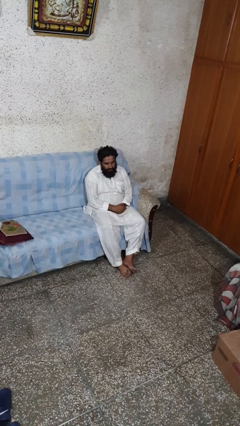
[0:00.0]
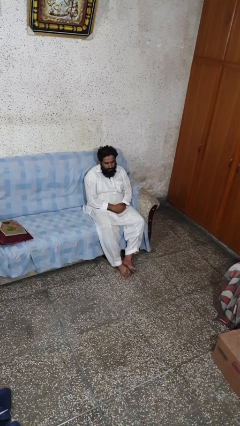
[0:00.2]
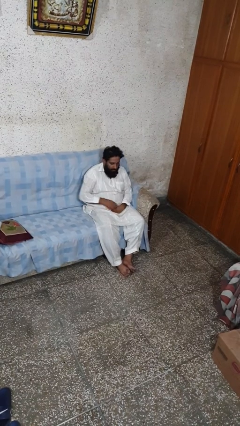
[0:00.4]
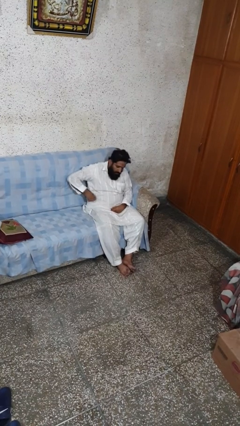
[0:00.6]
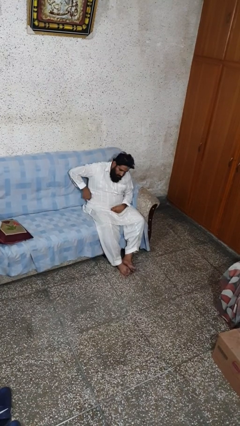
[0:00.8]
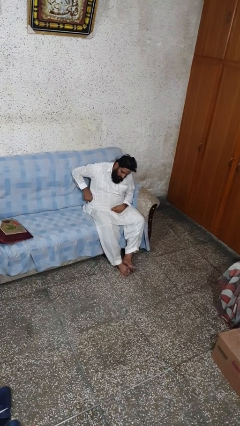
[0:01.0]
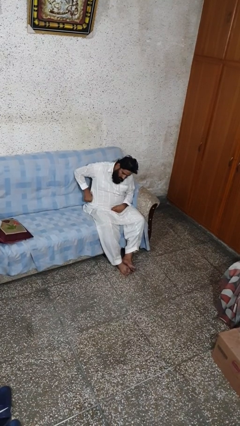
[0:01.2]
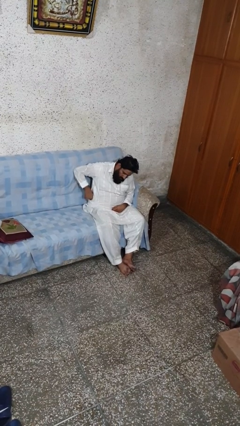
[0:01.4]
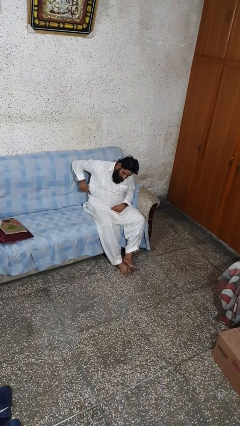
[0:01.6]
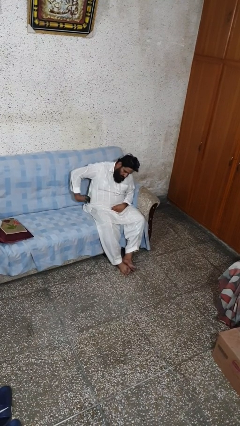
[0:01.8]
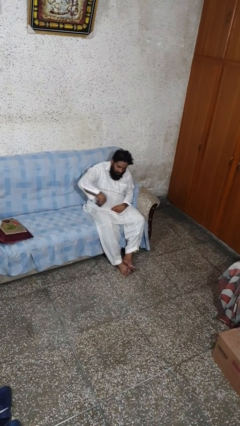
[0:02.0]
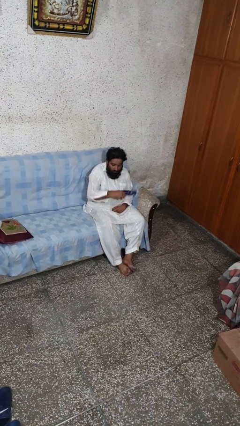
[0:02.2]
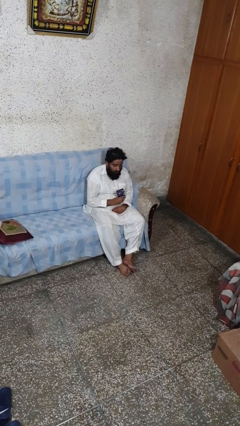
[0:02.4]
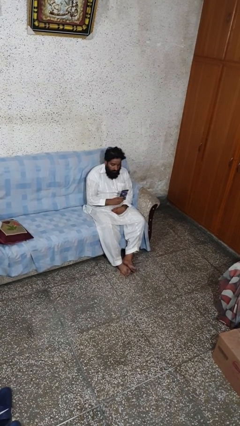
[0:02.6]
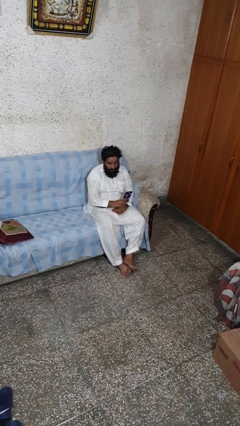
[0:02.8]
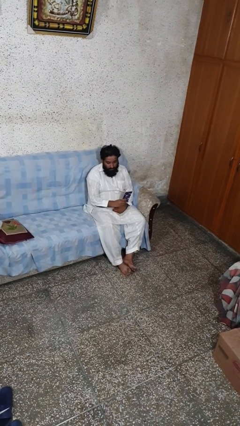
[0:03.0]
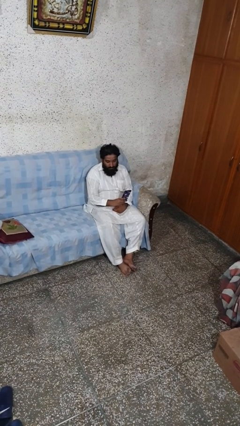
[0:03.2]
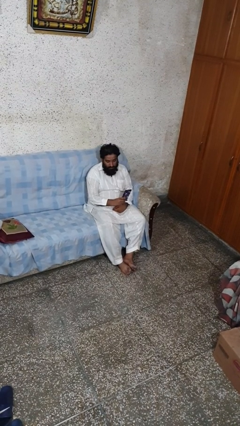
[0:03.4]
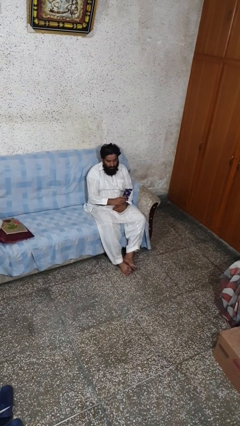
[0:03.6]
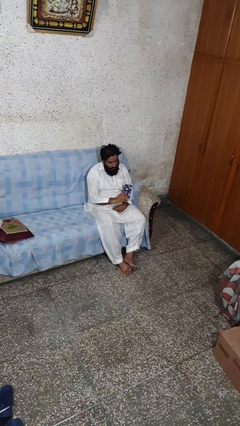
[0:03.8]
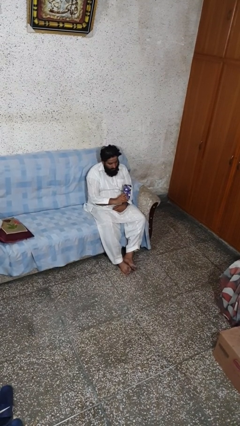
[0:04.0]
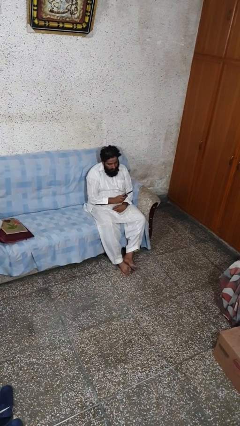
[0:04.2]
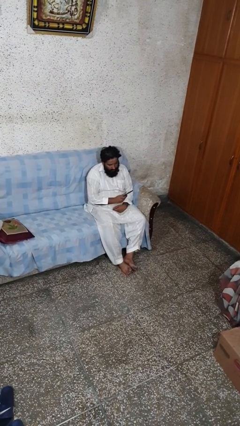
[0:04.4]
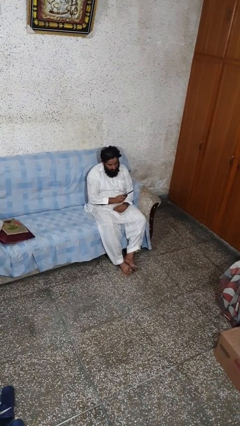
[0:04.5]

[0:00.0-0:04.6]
person takes phone from pocket

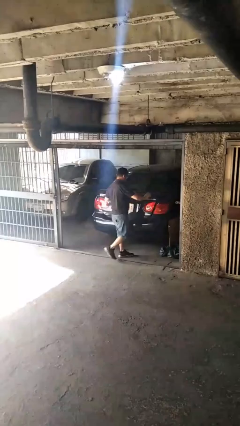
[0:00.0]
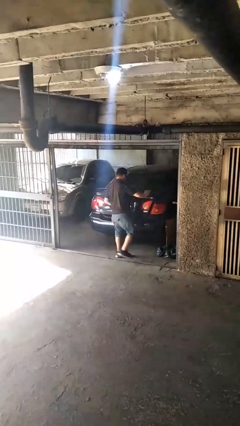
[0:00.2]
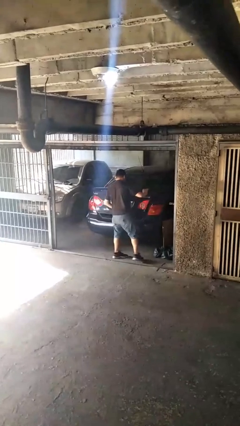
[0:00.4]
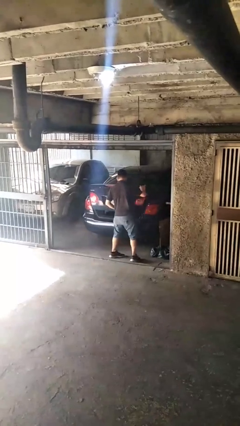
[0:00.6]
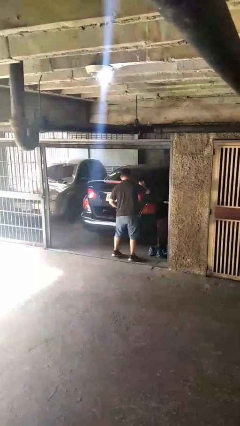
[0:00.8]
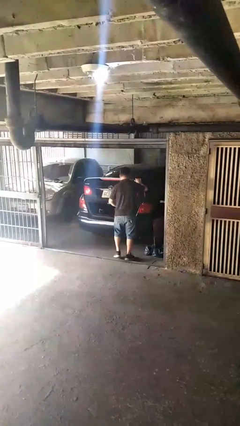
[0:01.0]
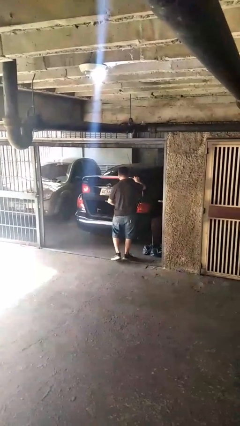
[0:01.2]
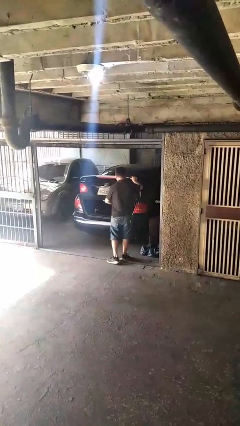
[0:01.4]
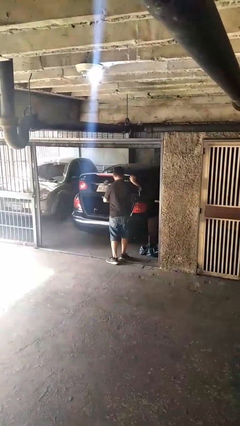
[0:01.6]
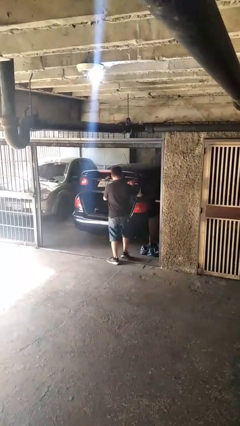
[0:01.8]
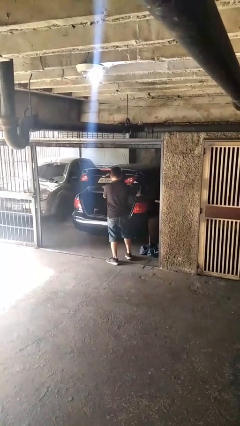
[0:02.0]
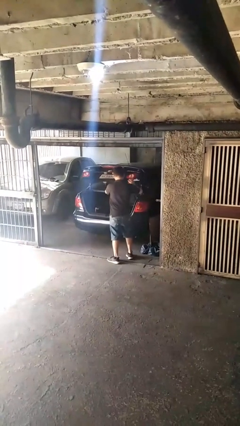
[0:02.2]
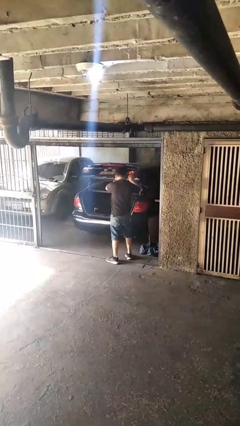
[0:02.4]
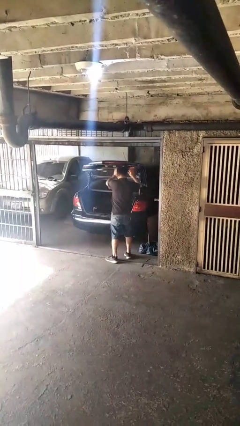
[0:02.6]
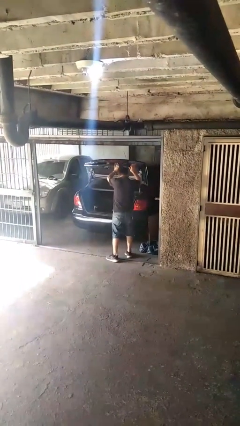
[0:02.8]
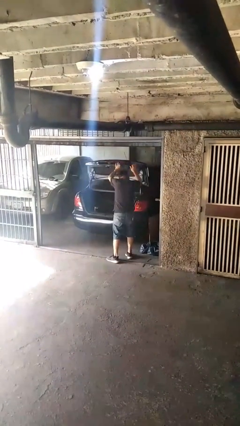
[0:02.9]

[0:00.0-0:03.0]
person opens car trunk

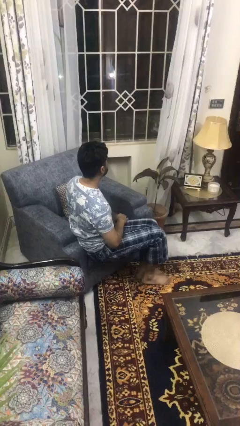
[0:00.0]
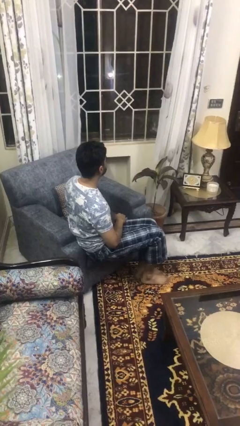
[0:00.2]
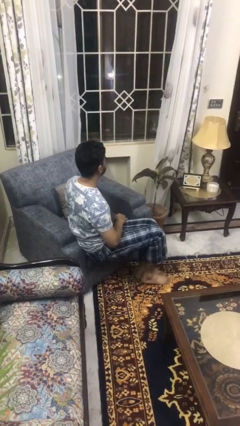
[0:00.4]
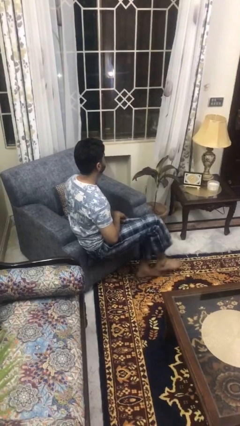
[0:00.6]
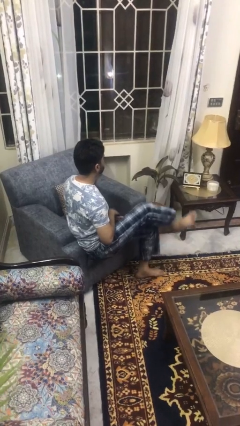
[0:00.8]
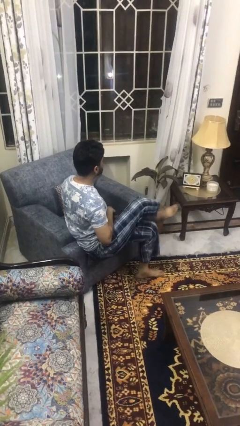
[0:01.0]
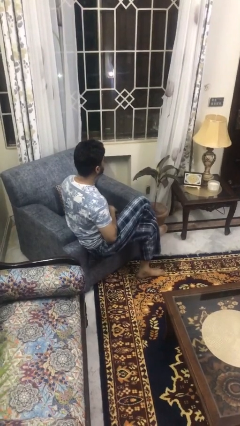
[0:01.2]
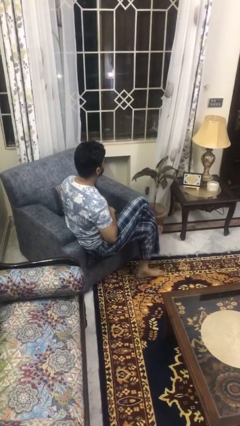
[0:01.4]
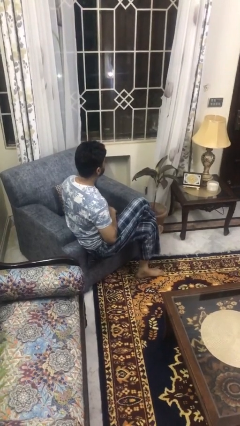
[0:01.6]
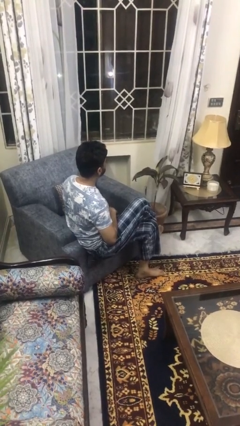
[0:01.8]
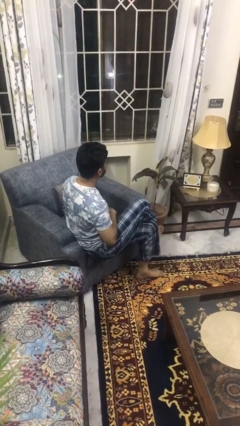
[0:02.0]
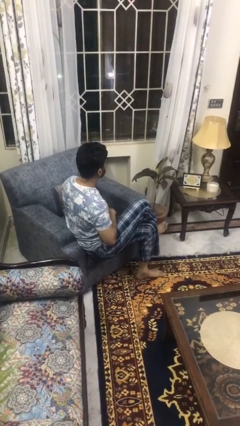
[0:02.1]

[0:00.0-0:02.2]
person crosses legs

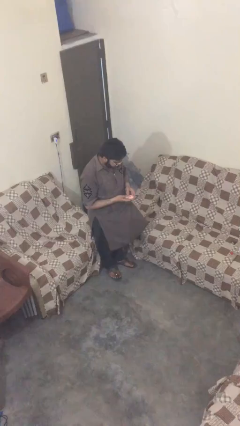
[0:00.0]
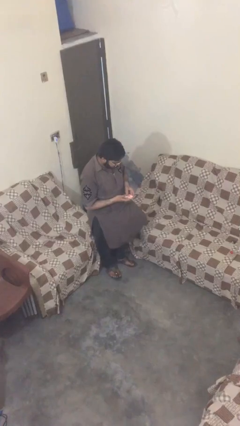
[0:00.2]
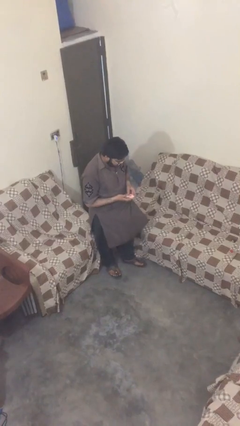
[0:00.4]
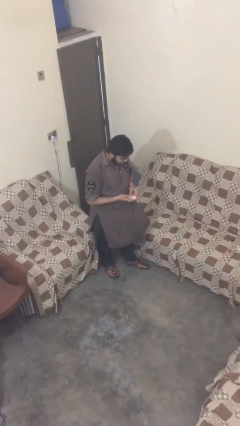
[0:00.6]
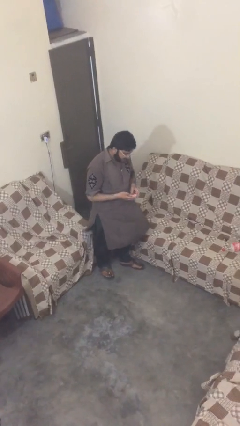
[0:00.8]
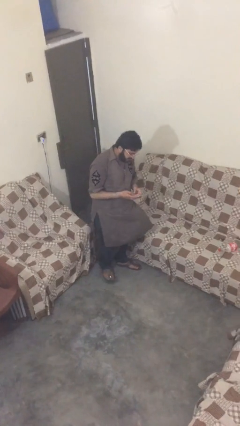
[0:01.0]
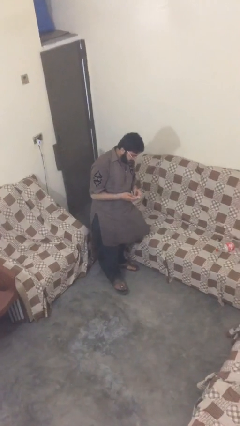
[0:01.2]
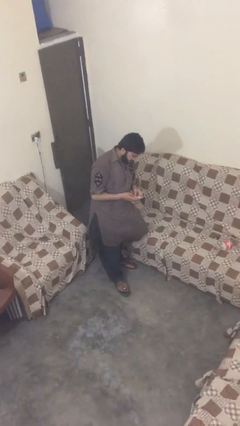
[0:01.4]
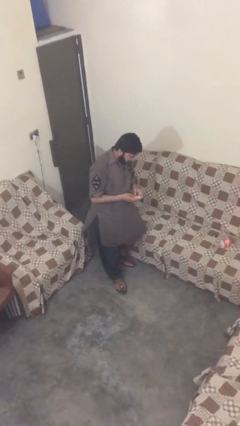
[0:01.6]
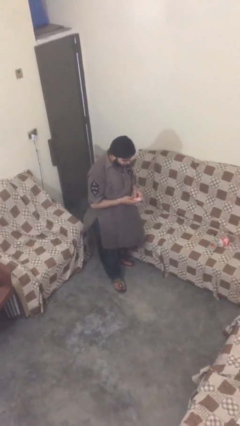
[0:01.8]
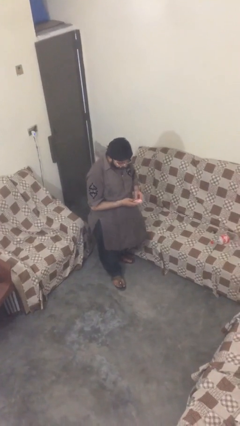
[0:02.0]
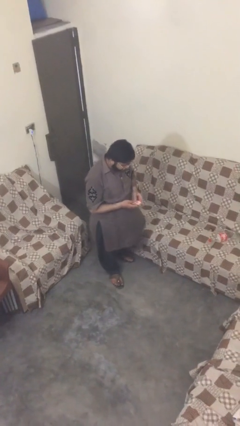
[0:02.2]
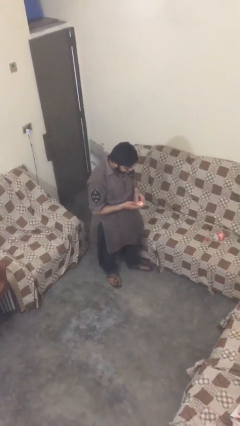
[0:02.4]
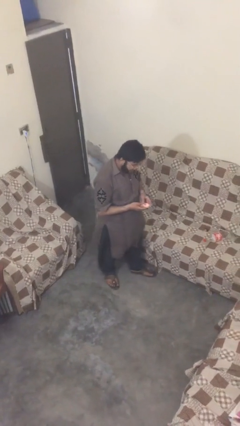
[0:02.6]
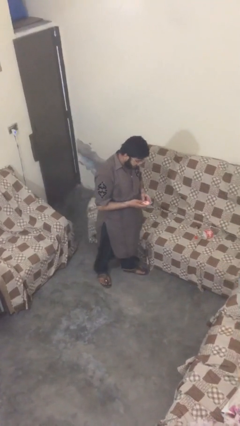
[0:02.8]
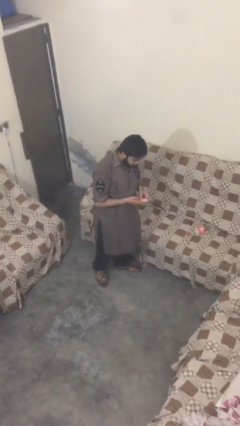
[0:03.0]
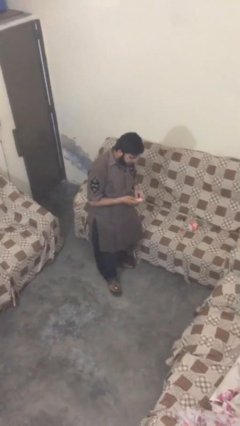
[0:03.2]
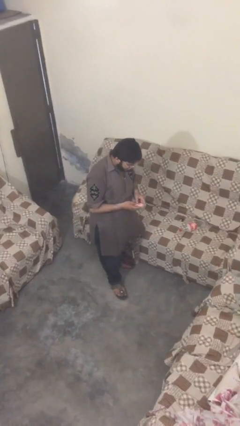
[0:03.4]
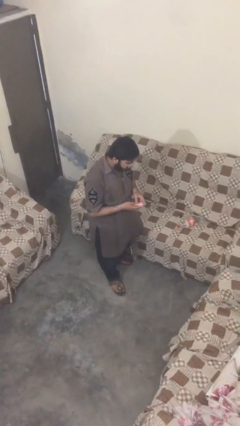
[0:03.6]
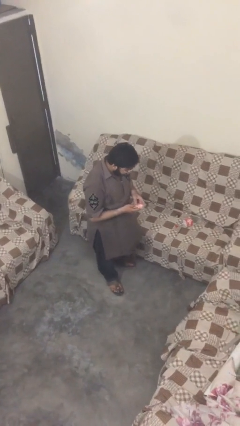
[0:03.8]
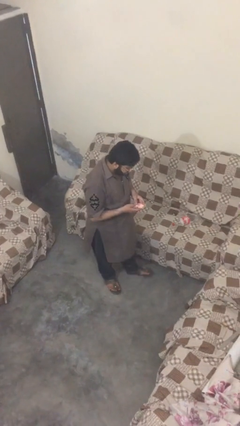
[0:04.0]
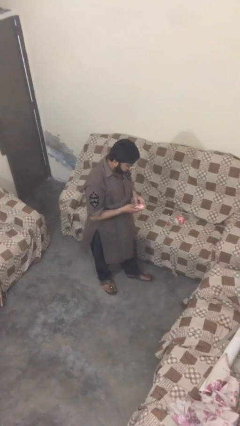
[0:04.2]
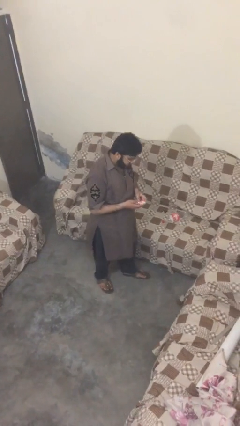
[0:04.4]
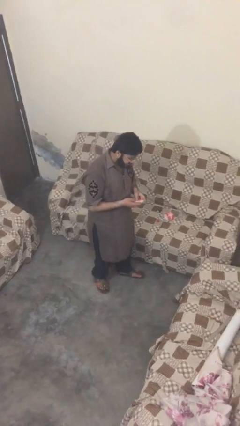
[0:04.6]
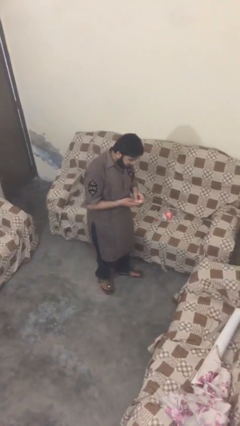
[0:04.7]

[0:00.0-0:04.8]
person texts on phone

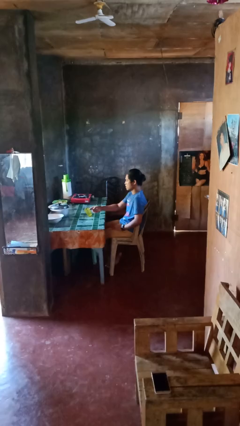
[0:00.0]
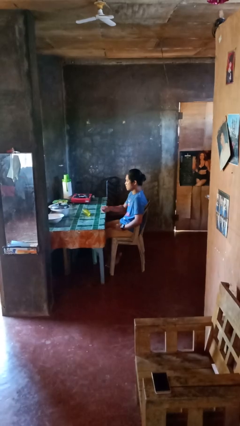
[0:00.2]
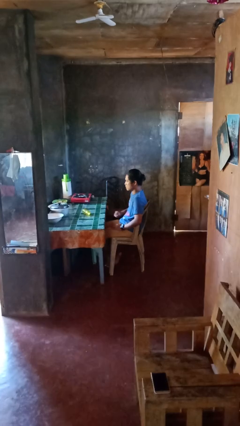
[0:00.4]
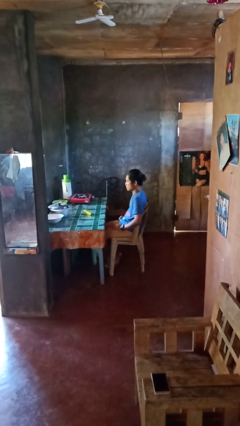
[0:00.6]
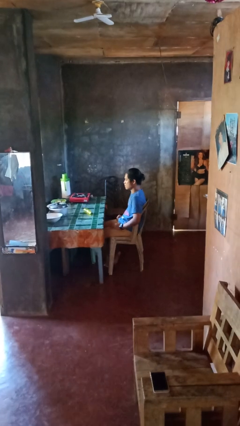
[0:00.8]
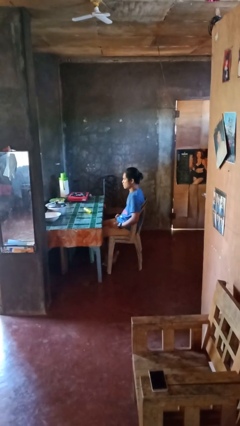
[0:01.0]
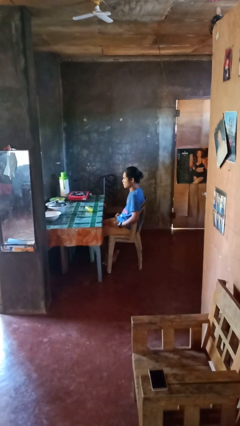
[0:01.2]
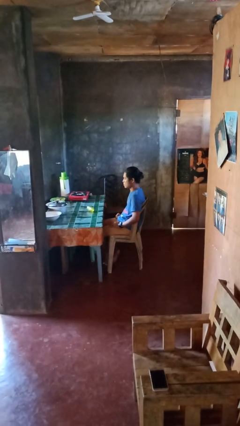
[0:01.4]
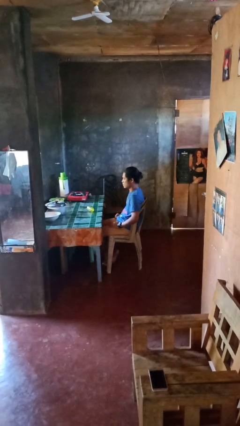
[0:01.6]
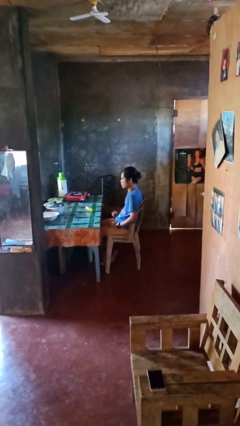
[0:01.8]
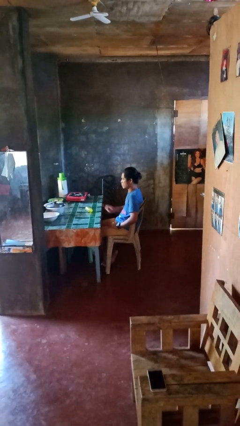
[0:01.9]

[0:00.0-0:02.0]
person knocks over glass

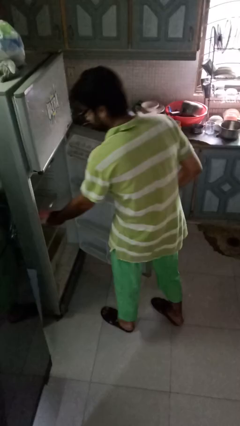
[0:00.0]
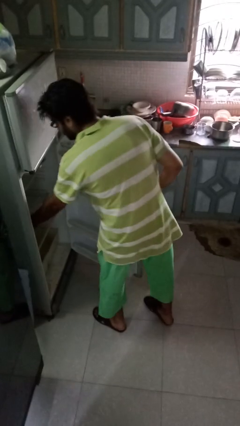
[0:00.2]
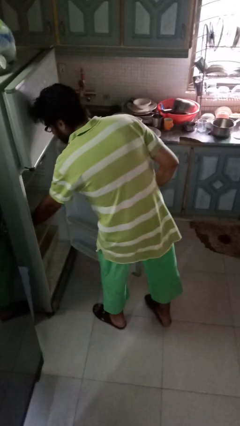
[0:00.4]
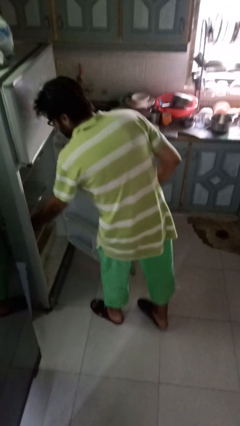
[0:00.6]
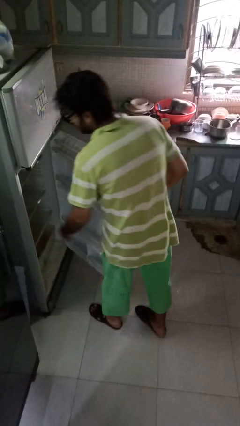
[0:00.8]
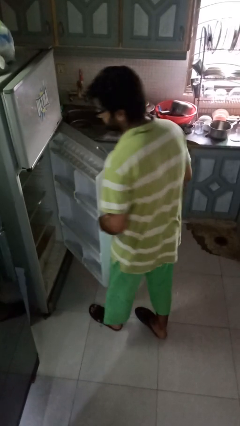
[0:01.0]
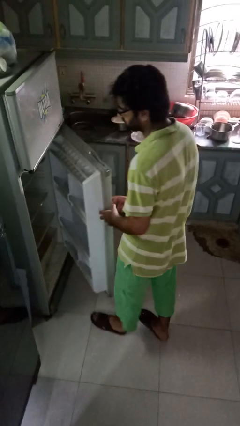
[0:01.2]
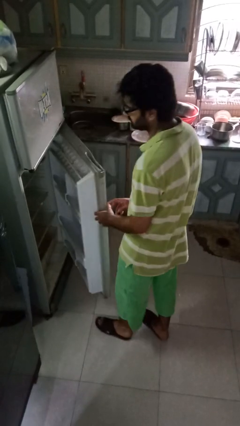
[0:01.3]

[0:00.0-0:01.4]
person puts object into refrigerator
